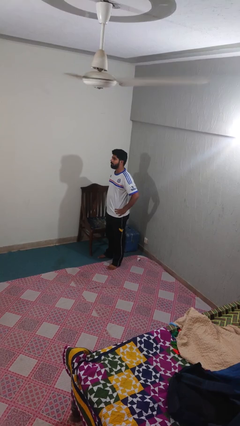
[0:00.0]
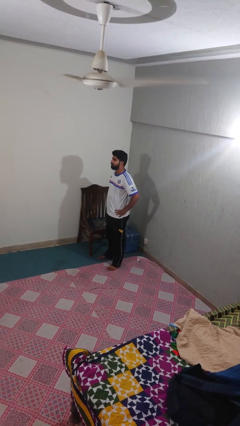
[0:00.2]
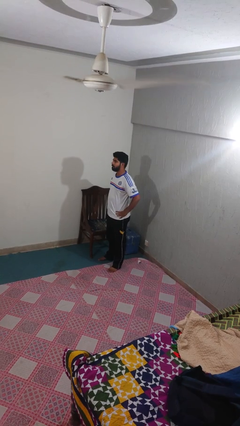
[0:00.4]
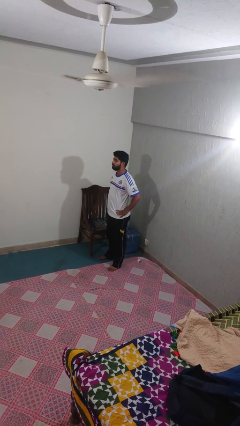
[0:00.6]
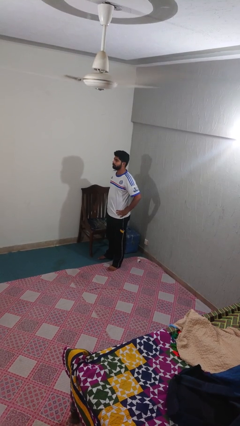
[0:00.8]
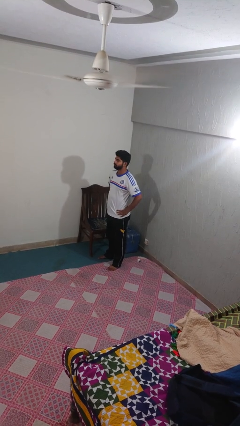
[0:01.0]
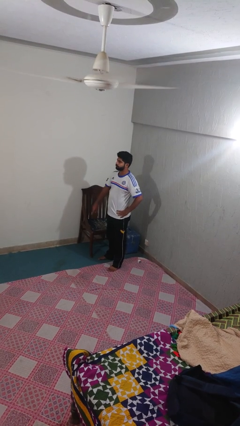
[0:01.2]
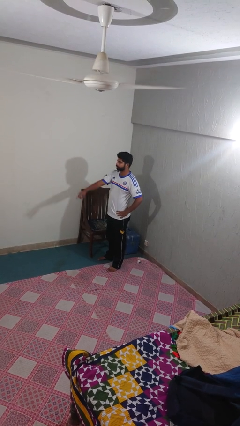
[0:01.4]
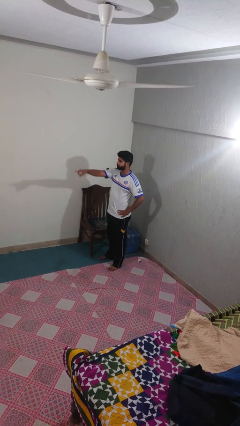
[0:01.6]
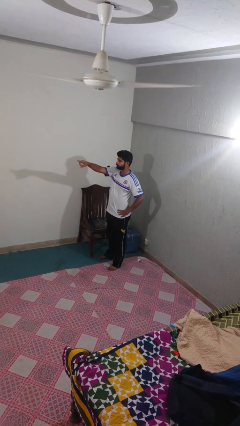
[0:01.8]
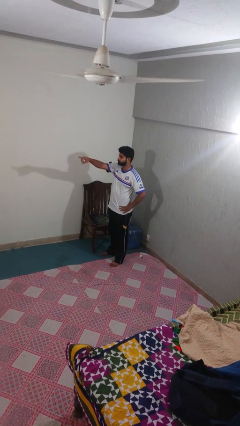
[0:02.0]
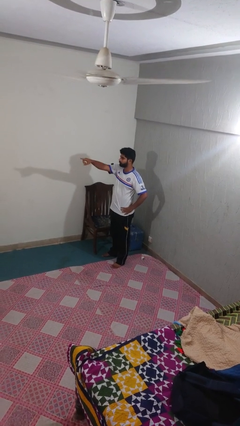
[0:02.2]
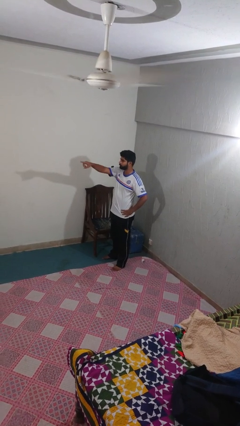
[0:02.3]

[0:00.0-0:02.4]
person points at person

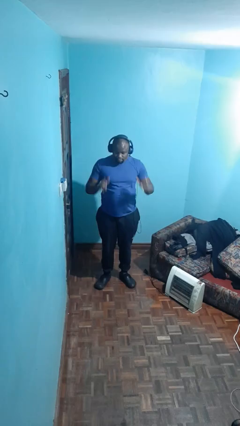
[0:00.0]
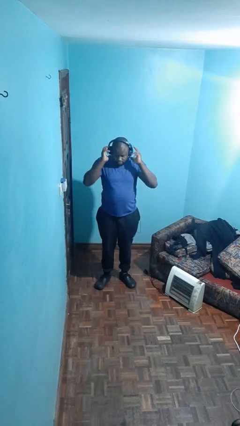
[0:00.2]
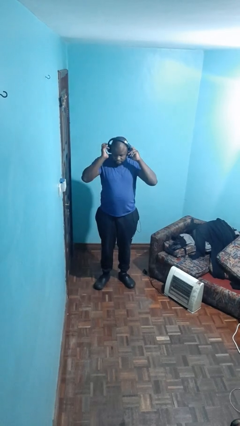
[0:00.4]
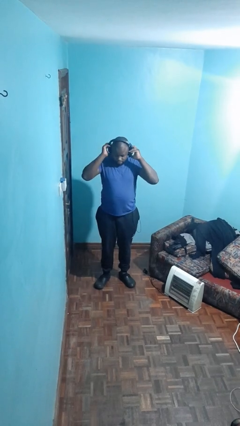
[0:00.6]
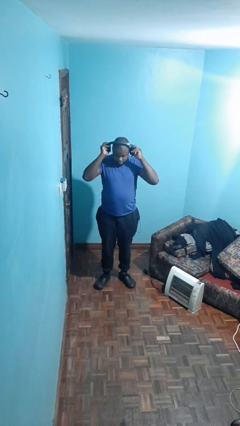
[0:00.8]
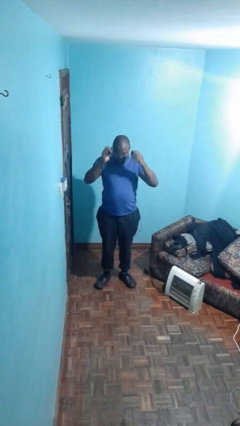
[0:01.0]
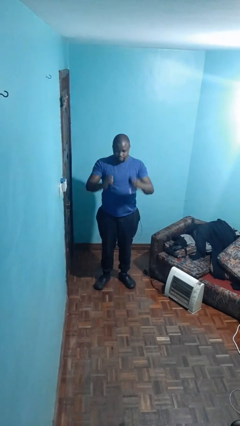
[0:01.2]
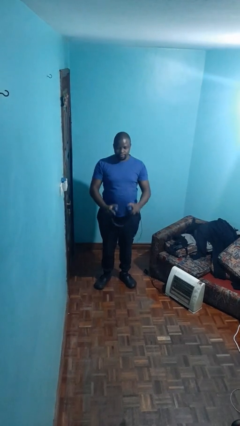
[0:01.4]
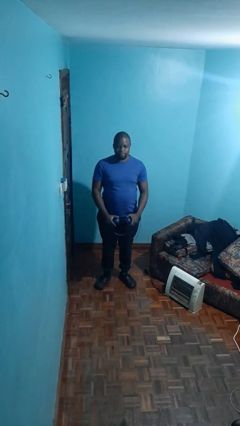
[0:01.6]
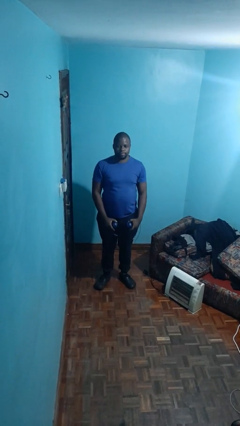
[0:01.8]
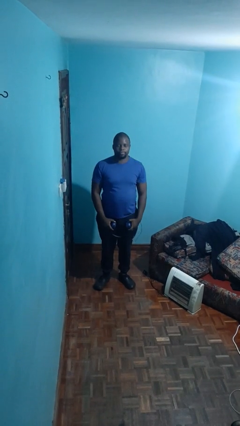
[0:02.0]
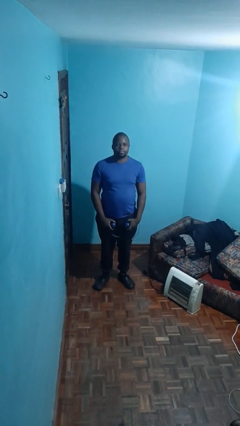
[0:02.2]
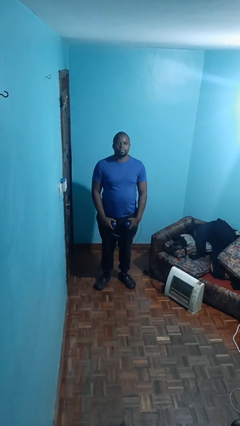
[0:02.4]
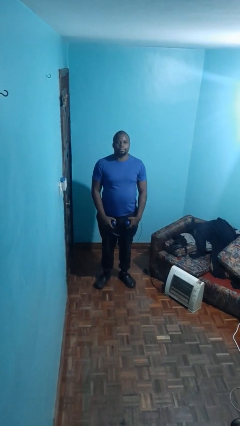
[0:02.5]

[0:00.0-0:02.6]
person takes off headphones

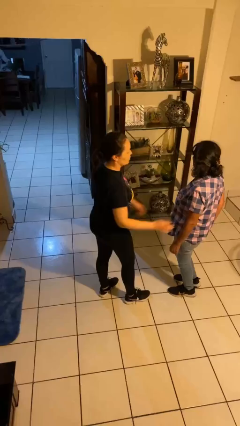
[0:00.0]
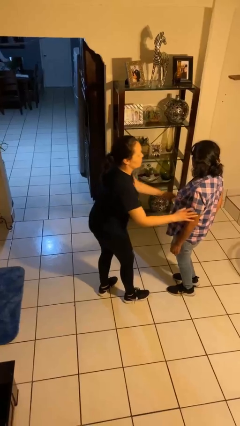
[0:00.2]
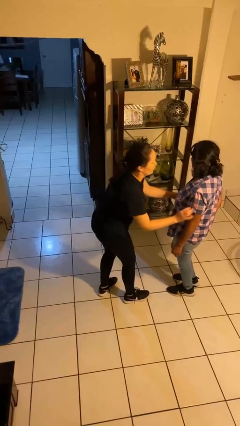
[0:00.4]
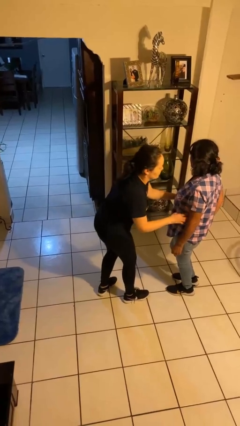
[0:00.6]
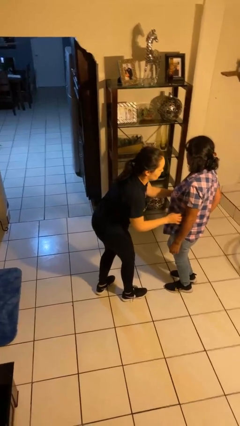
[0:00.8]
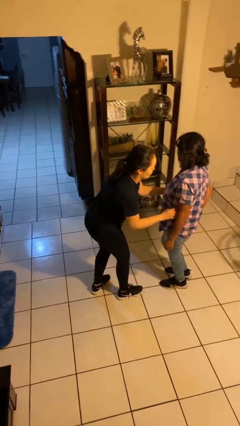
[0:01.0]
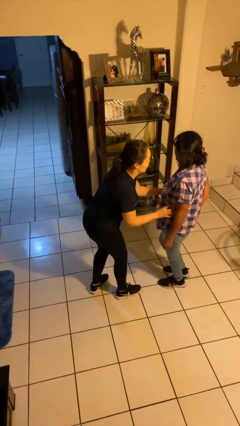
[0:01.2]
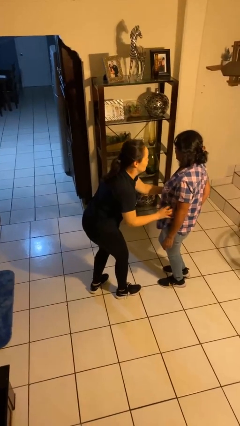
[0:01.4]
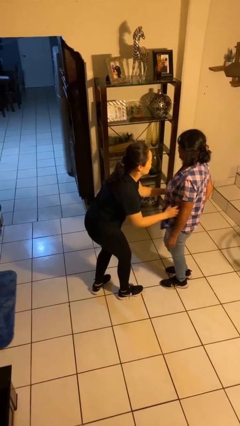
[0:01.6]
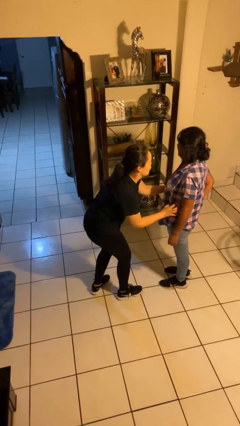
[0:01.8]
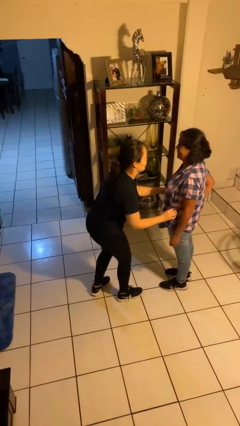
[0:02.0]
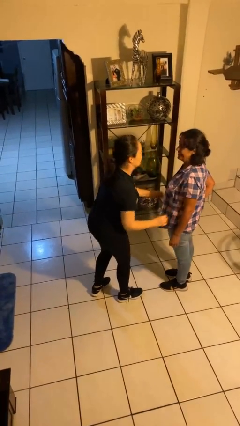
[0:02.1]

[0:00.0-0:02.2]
person tickles person

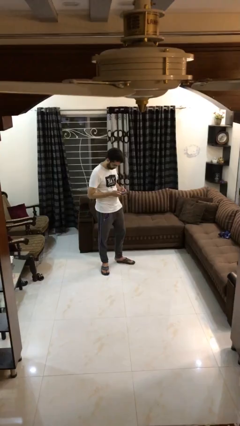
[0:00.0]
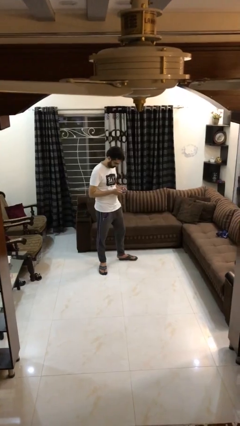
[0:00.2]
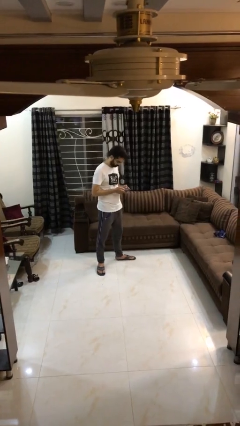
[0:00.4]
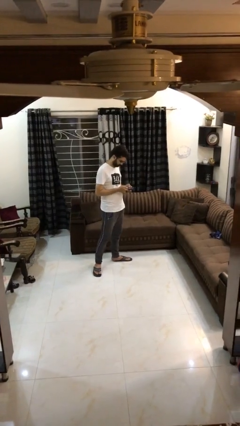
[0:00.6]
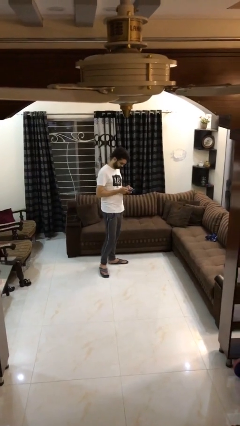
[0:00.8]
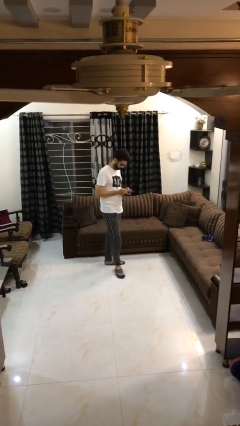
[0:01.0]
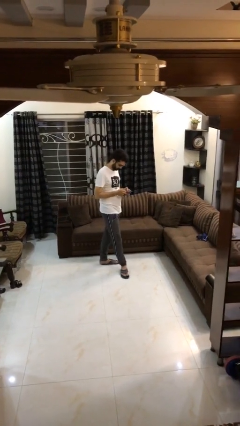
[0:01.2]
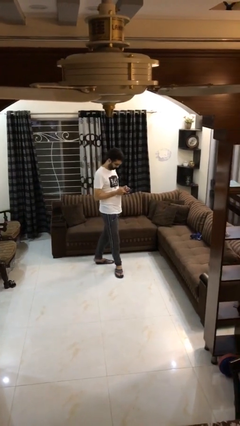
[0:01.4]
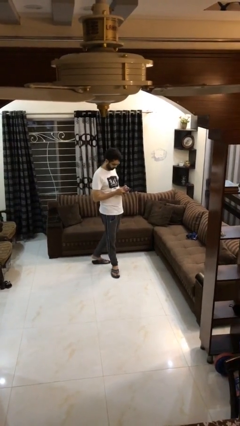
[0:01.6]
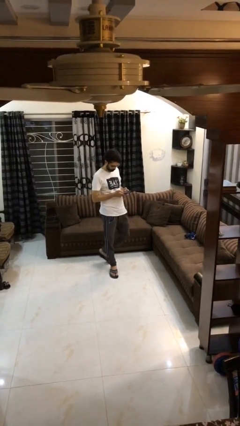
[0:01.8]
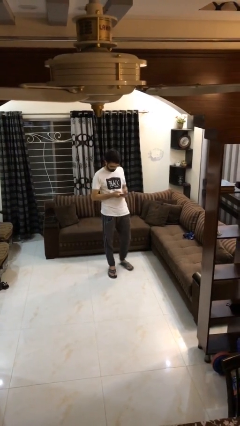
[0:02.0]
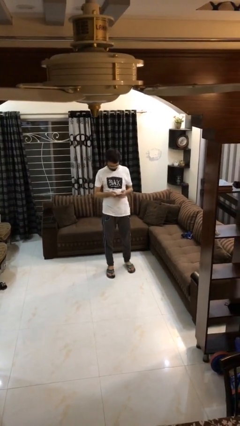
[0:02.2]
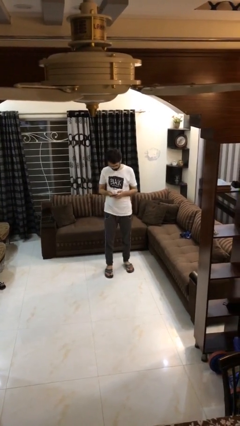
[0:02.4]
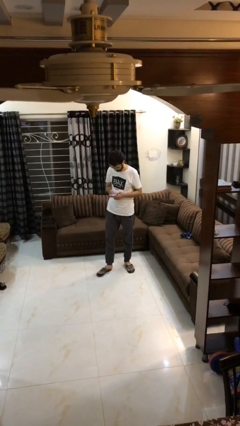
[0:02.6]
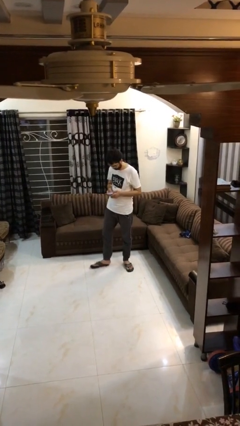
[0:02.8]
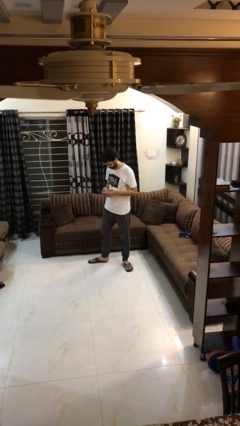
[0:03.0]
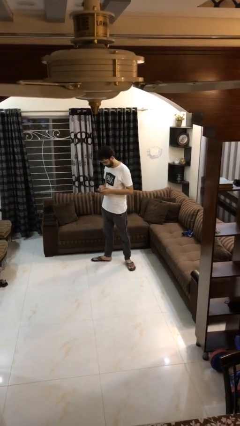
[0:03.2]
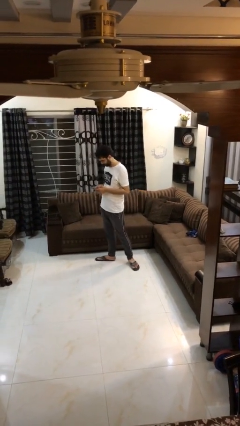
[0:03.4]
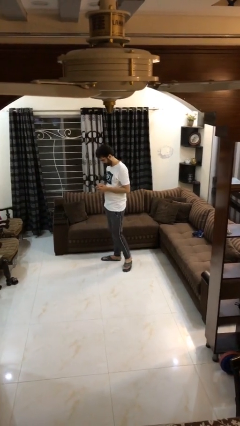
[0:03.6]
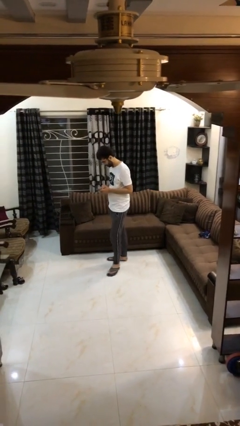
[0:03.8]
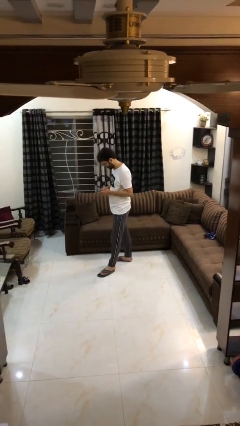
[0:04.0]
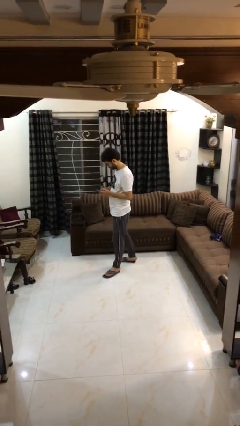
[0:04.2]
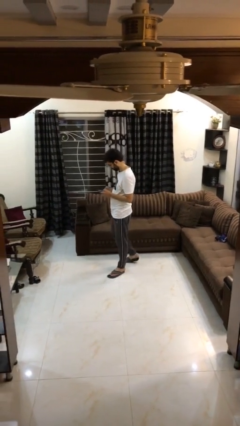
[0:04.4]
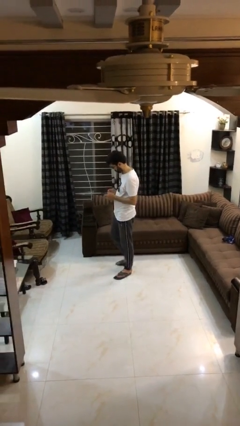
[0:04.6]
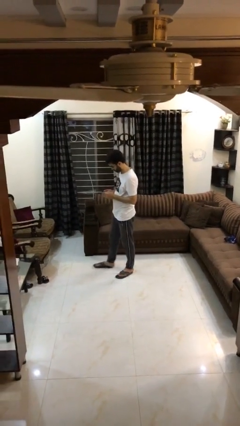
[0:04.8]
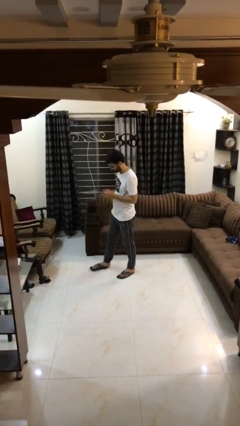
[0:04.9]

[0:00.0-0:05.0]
person texts on phone

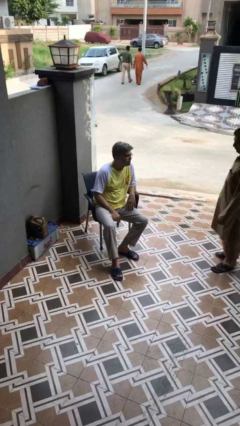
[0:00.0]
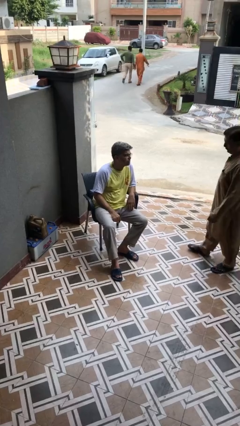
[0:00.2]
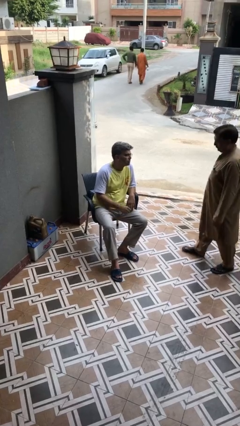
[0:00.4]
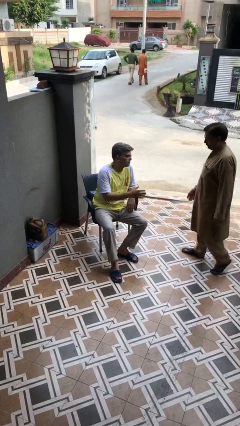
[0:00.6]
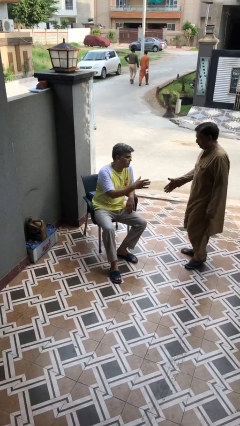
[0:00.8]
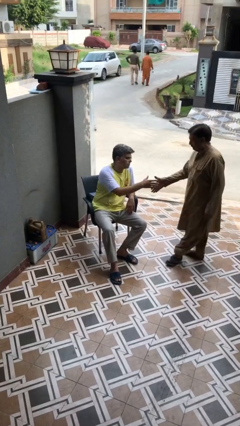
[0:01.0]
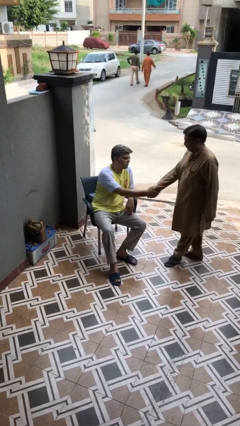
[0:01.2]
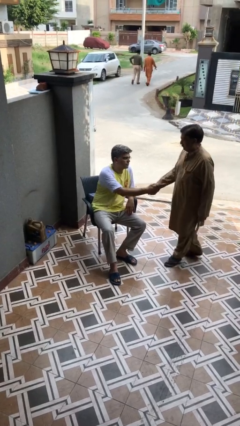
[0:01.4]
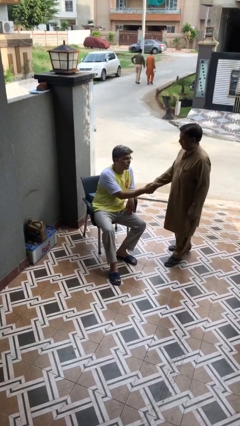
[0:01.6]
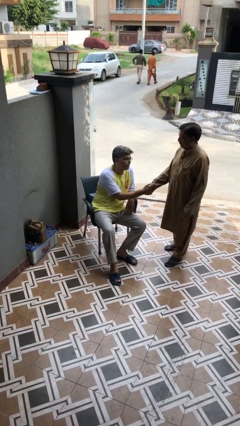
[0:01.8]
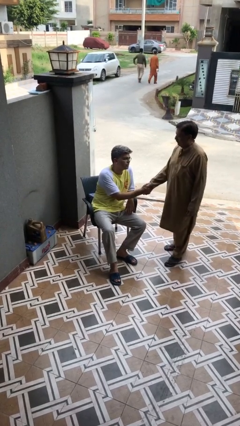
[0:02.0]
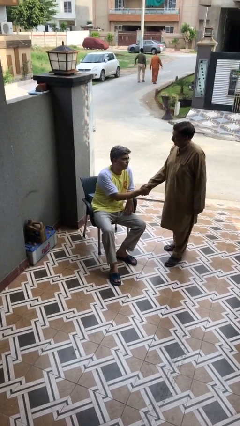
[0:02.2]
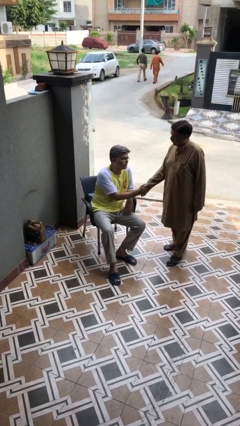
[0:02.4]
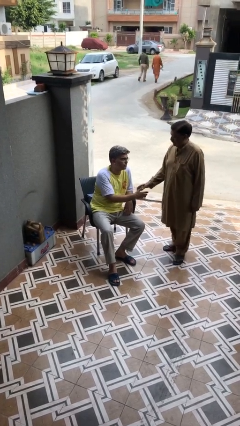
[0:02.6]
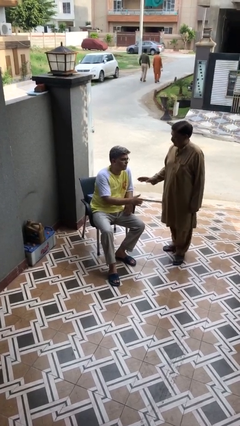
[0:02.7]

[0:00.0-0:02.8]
person shakes hand

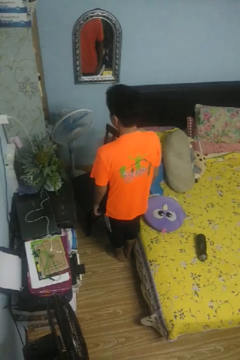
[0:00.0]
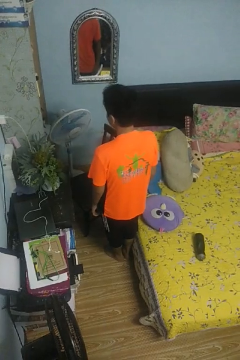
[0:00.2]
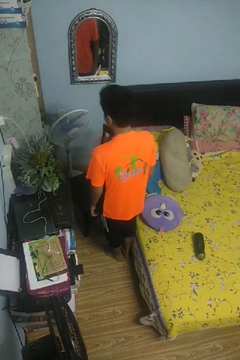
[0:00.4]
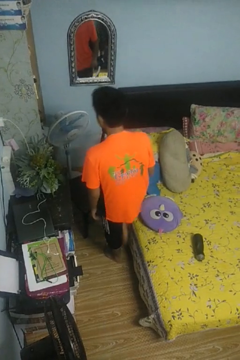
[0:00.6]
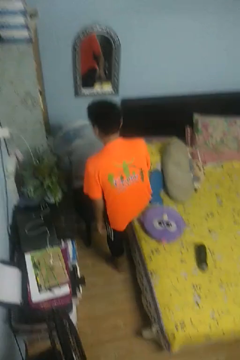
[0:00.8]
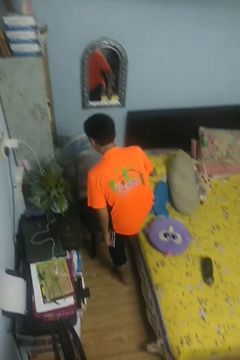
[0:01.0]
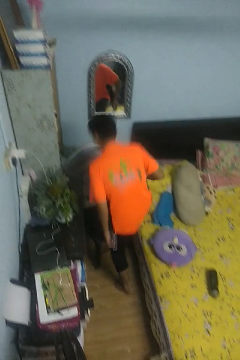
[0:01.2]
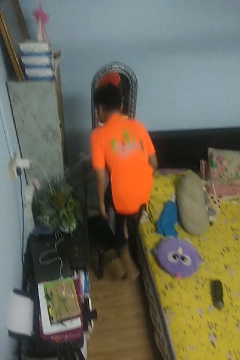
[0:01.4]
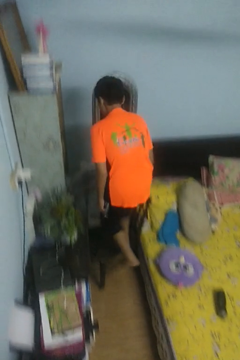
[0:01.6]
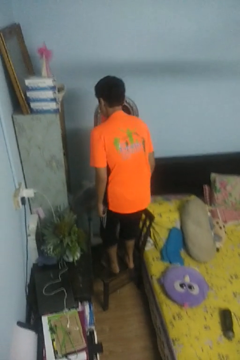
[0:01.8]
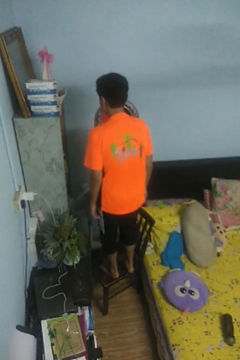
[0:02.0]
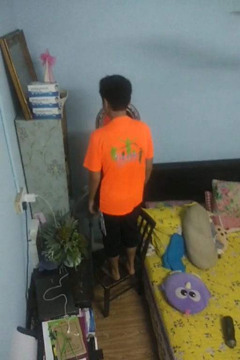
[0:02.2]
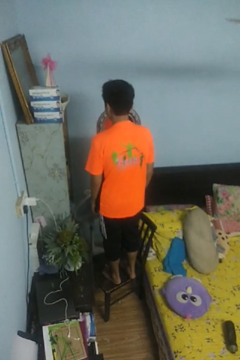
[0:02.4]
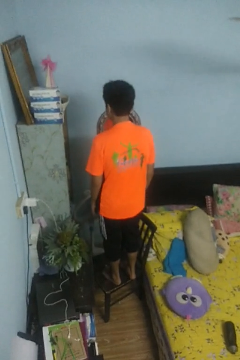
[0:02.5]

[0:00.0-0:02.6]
person climbs on chair
